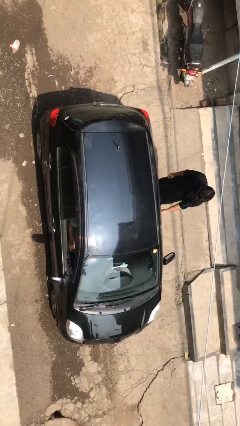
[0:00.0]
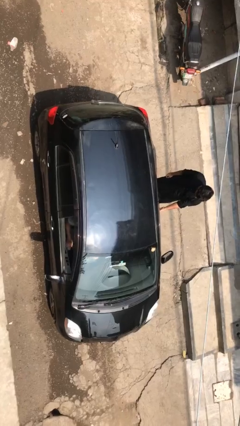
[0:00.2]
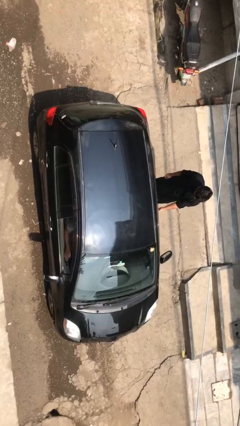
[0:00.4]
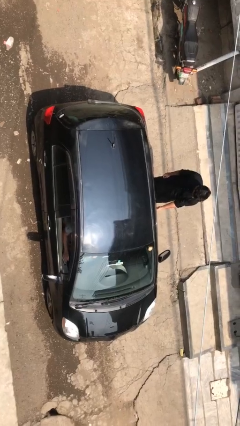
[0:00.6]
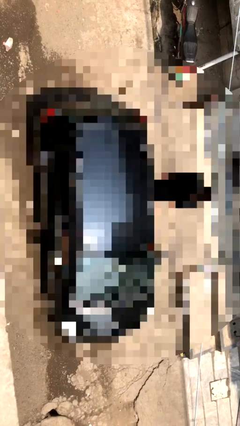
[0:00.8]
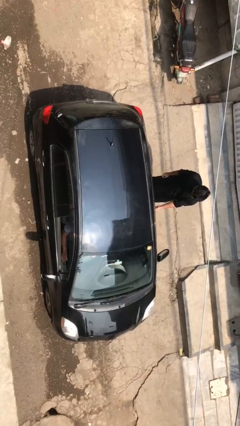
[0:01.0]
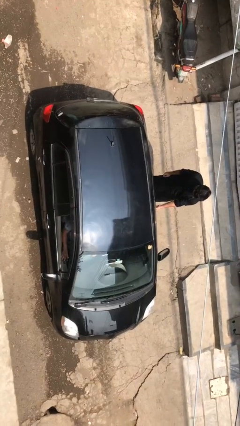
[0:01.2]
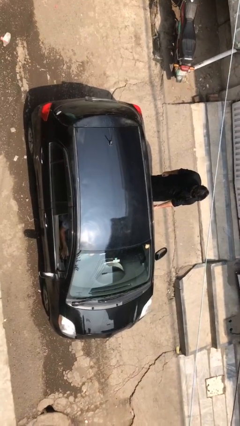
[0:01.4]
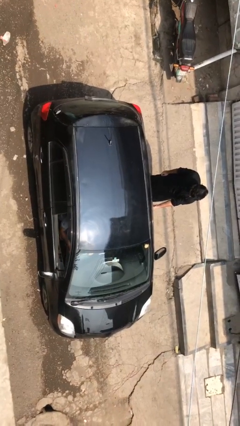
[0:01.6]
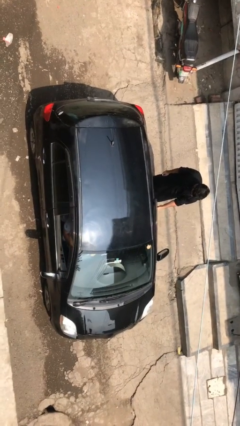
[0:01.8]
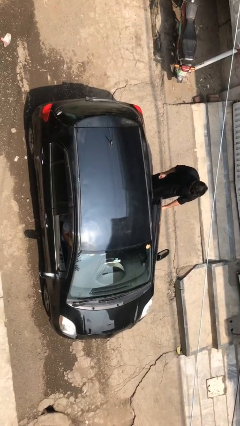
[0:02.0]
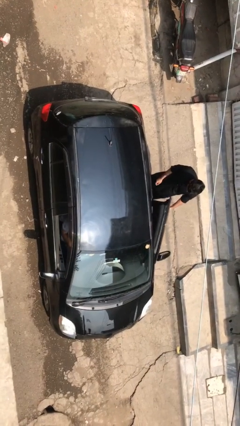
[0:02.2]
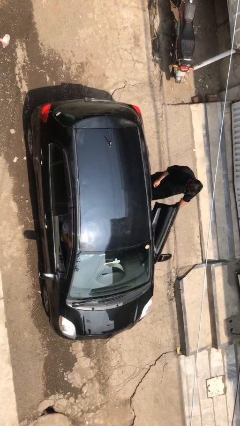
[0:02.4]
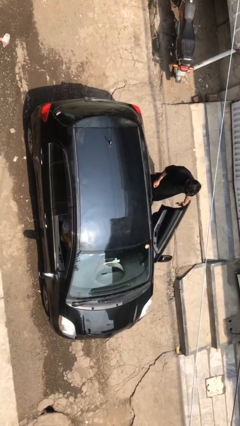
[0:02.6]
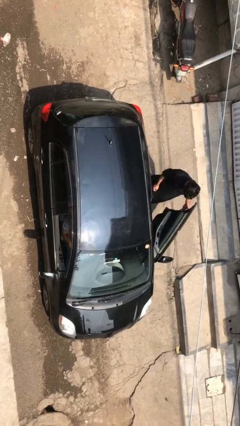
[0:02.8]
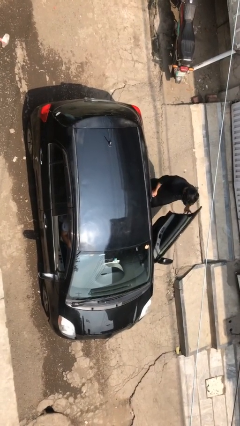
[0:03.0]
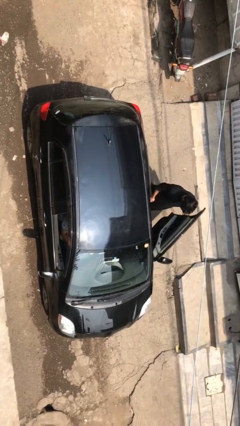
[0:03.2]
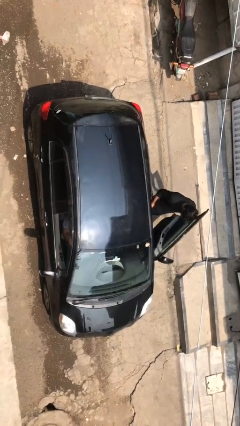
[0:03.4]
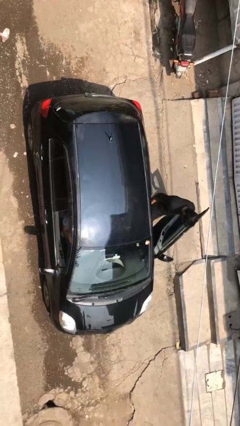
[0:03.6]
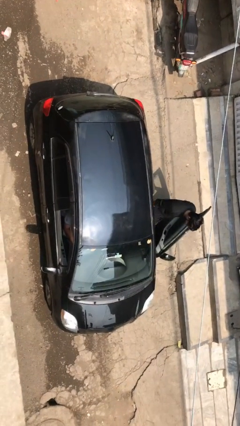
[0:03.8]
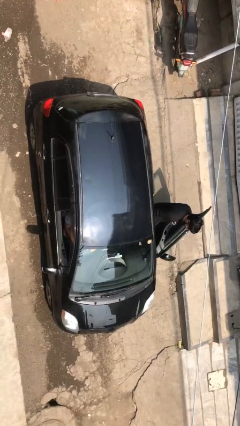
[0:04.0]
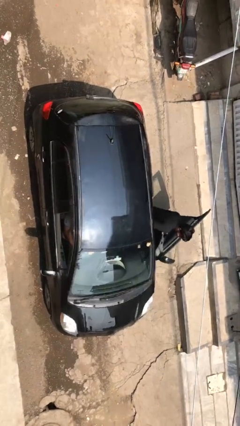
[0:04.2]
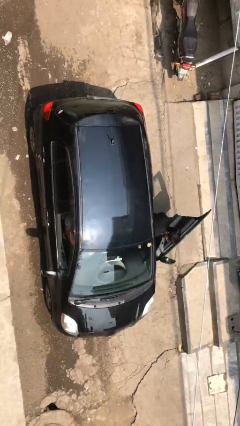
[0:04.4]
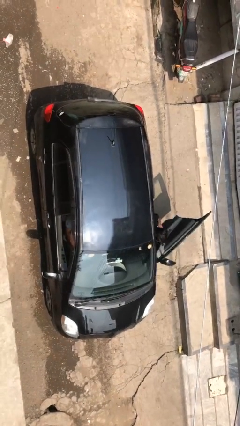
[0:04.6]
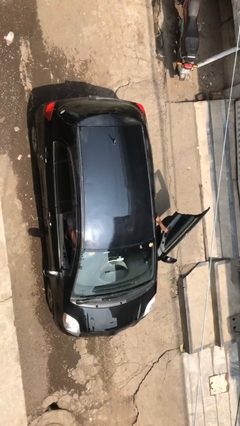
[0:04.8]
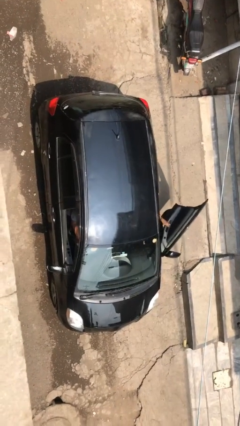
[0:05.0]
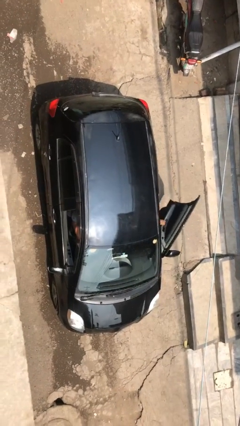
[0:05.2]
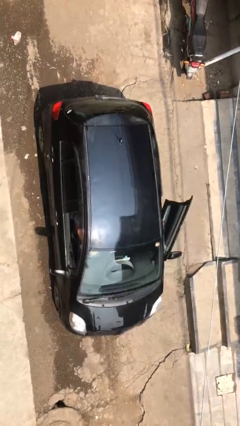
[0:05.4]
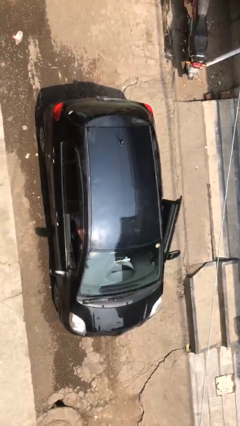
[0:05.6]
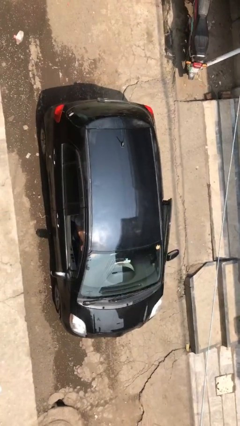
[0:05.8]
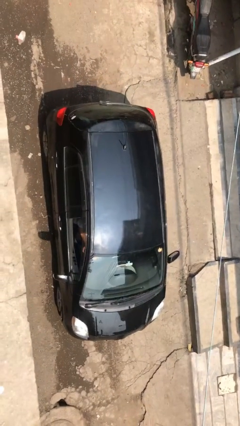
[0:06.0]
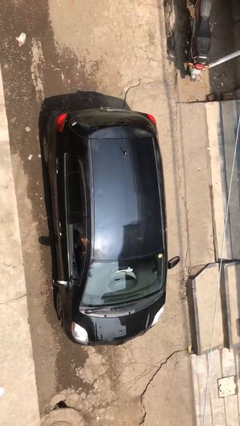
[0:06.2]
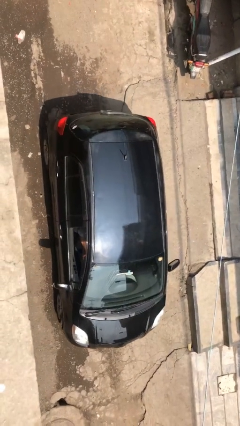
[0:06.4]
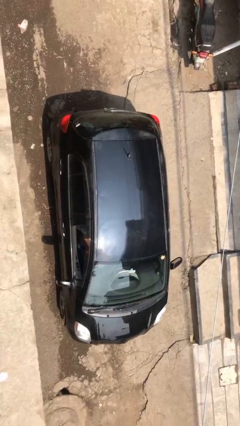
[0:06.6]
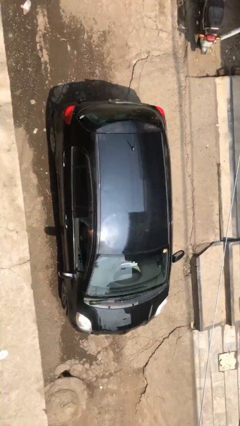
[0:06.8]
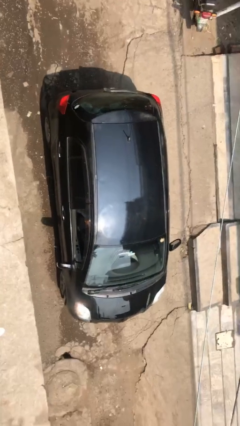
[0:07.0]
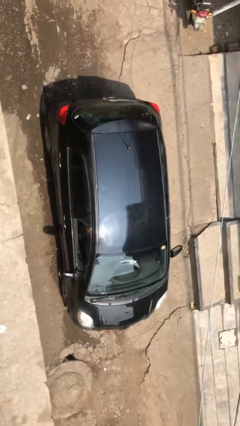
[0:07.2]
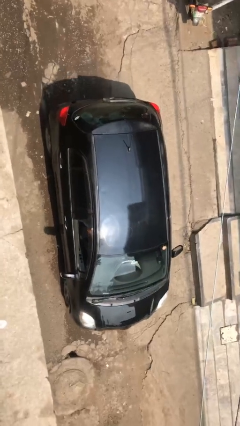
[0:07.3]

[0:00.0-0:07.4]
car picks up person

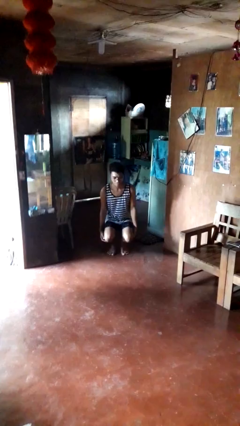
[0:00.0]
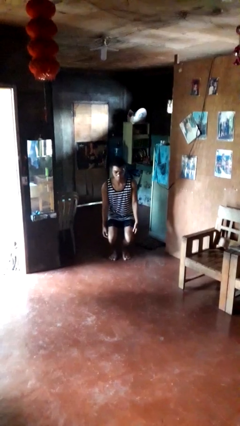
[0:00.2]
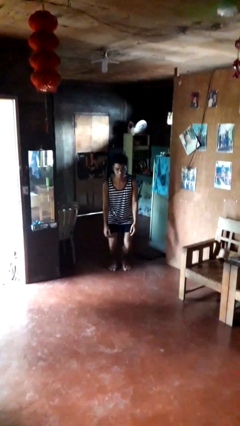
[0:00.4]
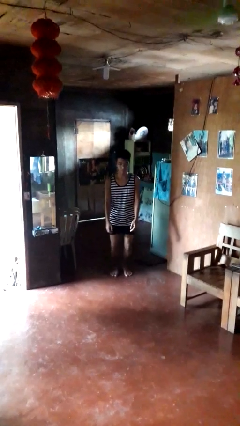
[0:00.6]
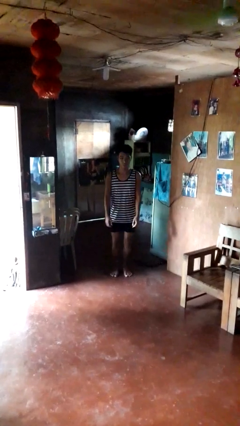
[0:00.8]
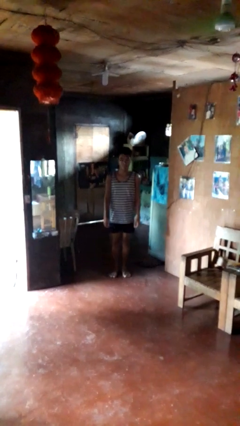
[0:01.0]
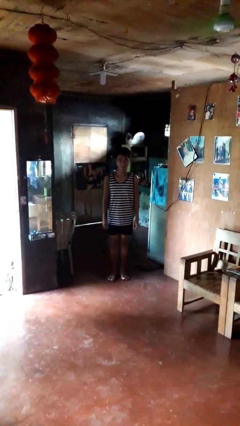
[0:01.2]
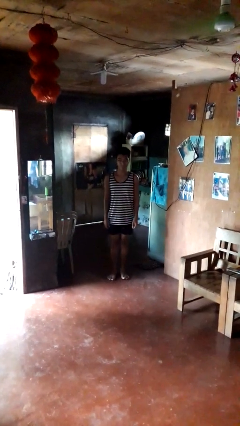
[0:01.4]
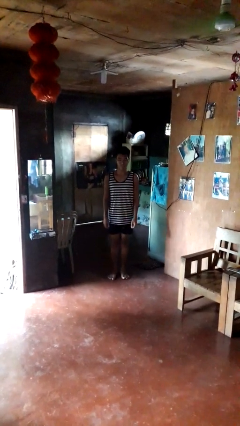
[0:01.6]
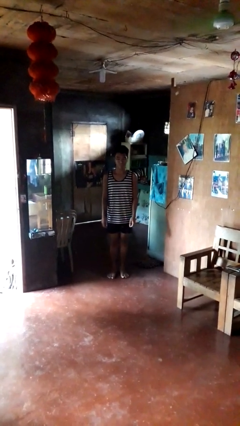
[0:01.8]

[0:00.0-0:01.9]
person stands up

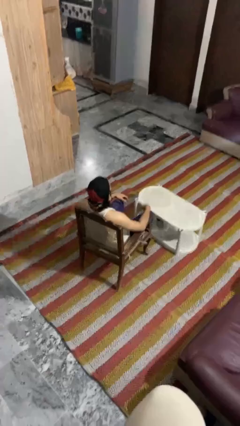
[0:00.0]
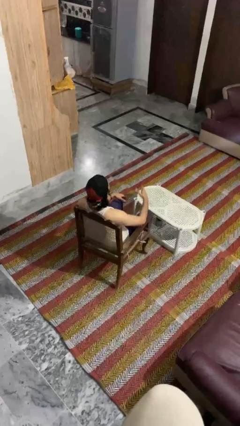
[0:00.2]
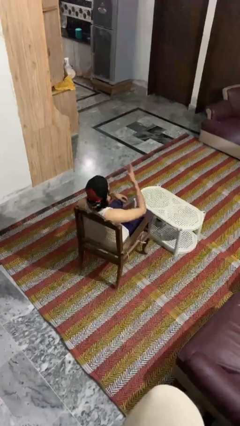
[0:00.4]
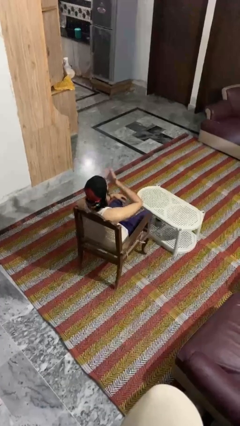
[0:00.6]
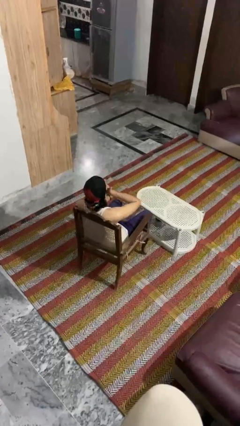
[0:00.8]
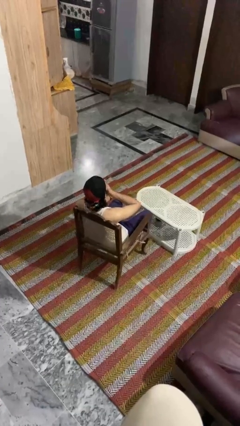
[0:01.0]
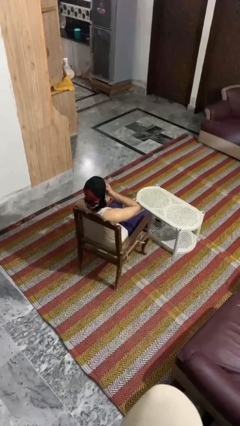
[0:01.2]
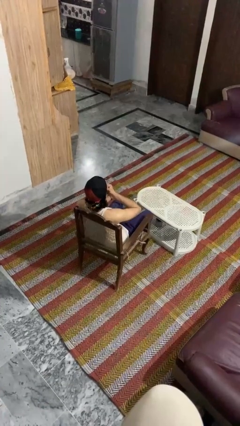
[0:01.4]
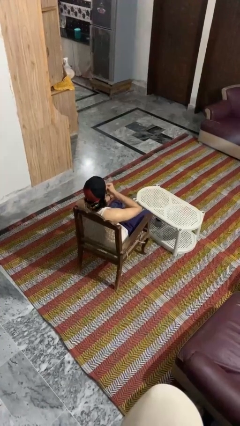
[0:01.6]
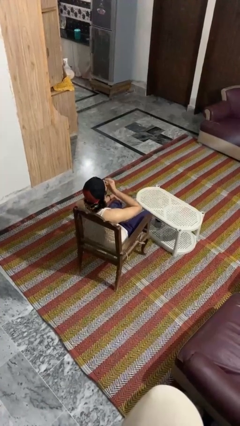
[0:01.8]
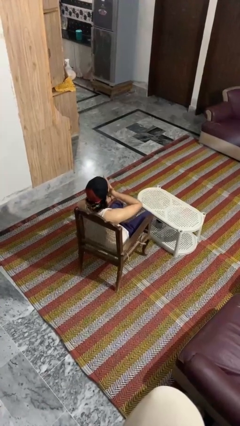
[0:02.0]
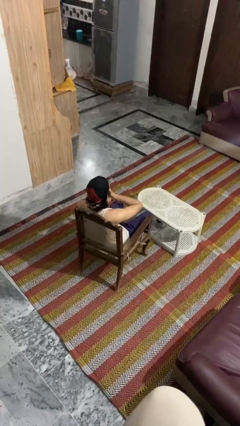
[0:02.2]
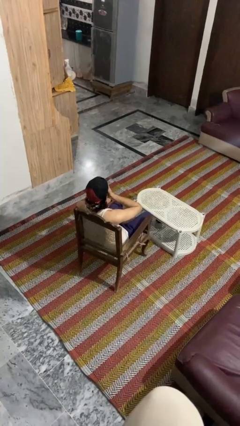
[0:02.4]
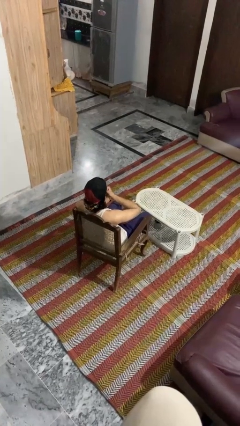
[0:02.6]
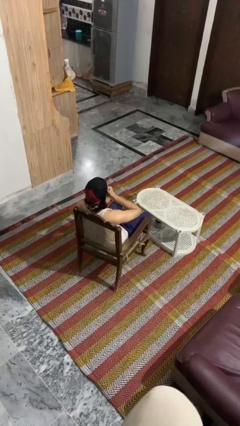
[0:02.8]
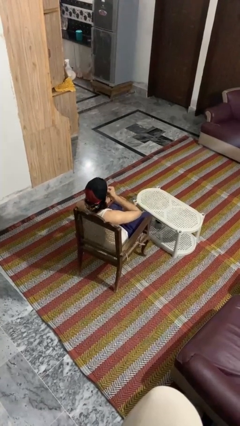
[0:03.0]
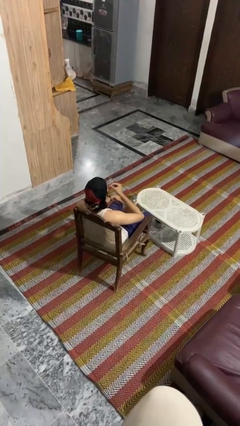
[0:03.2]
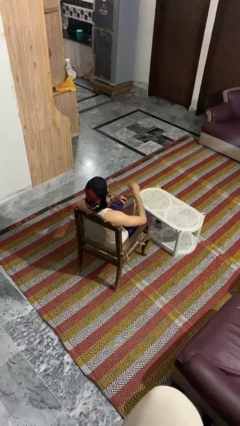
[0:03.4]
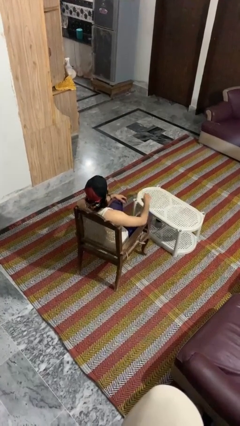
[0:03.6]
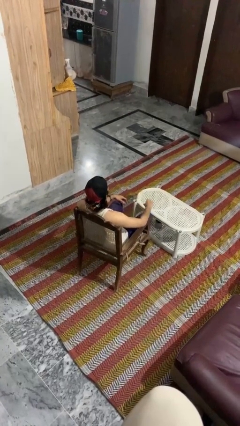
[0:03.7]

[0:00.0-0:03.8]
person strokes chin

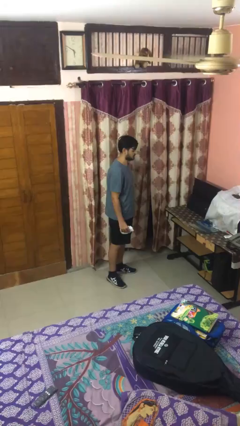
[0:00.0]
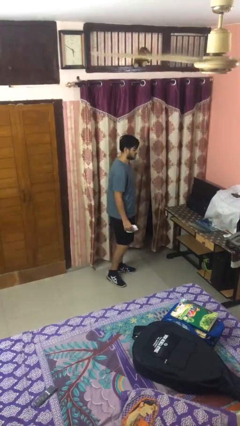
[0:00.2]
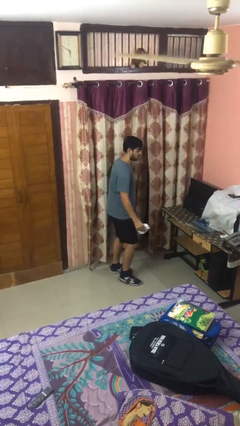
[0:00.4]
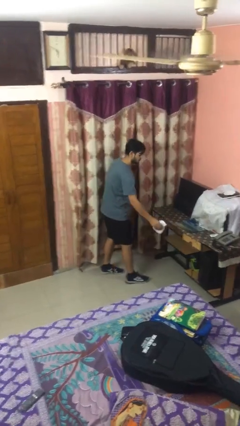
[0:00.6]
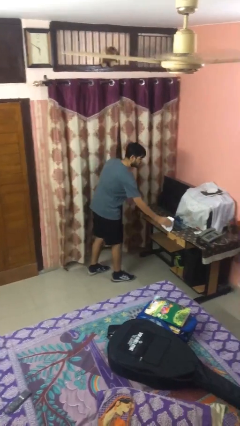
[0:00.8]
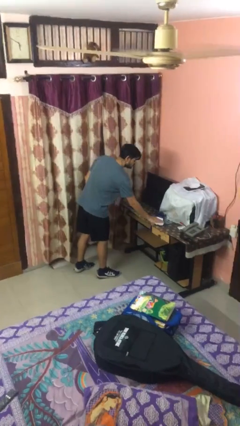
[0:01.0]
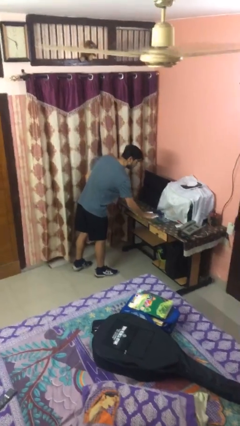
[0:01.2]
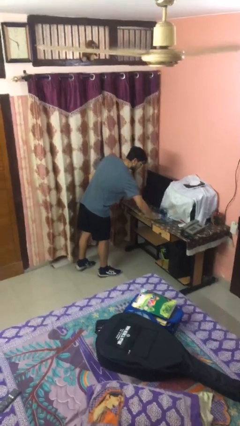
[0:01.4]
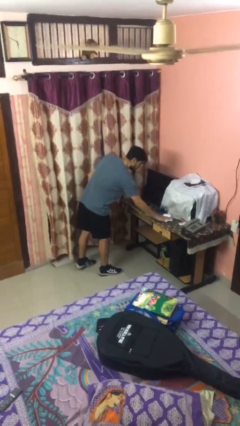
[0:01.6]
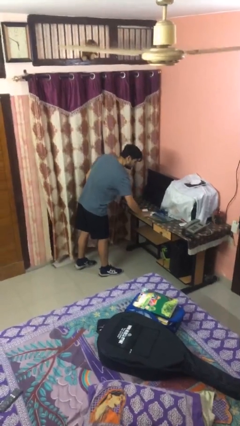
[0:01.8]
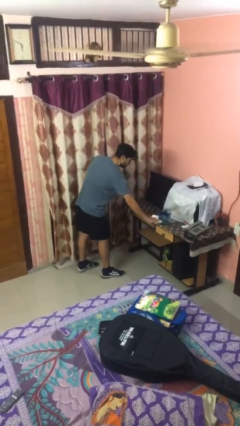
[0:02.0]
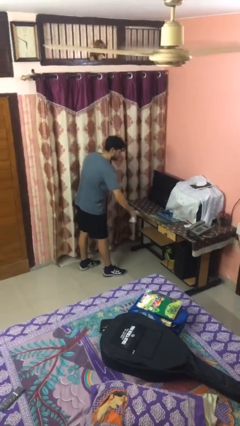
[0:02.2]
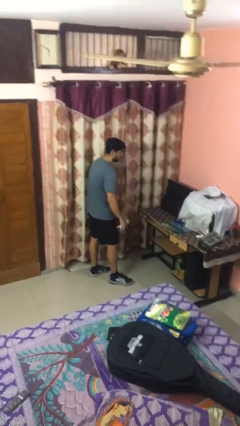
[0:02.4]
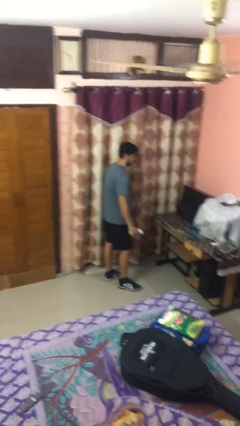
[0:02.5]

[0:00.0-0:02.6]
person cleans table with rag

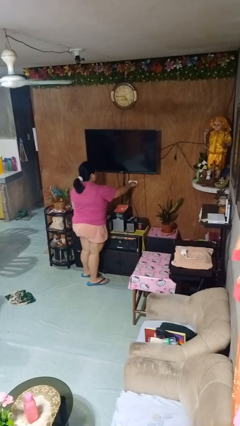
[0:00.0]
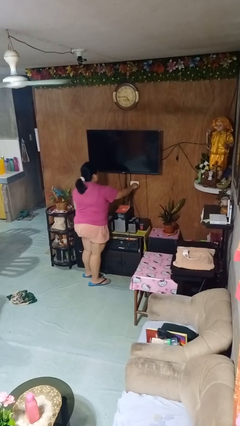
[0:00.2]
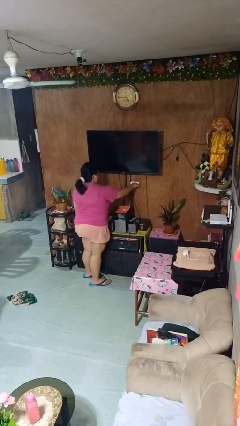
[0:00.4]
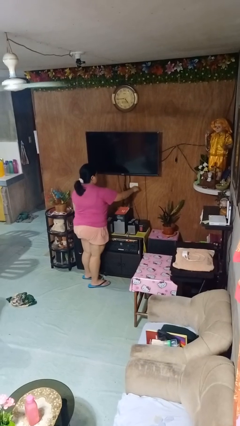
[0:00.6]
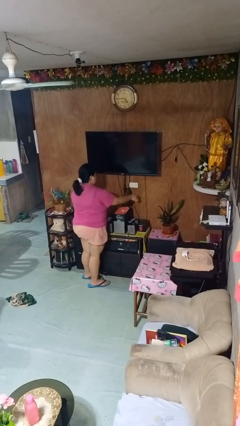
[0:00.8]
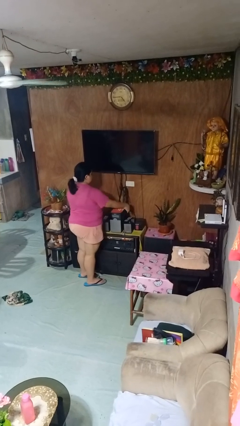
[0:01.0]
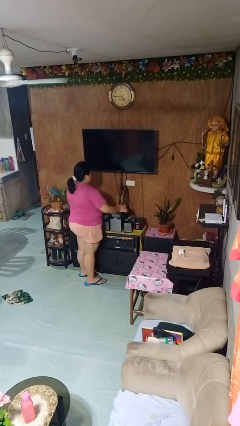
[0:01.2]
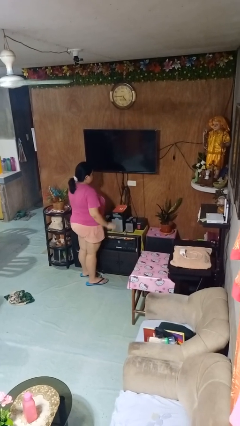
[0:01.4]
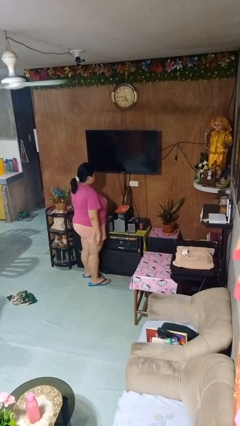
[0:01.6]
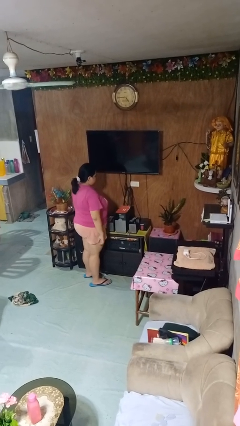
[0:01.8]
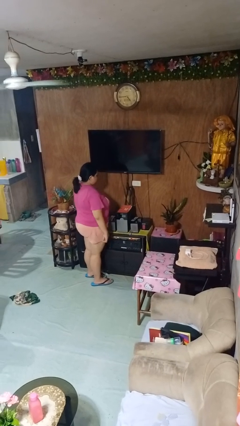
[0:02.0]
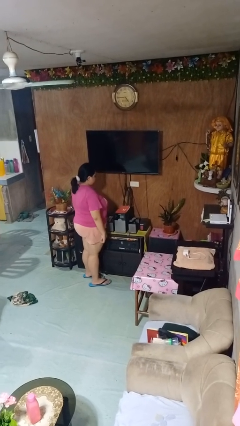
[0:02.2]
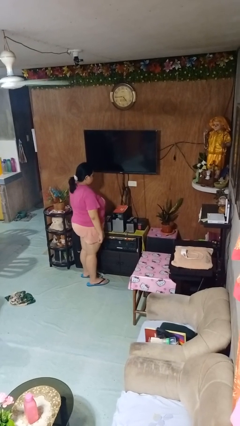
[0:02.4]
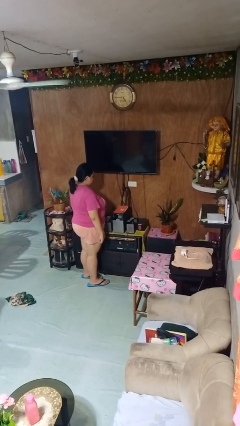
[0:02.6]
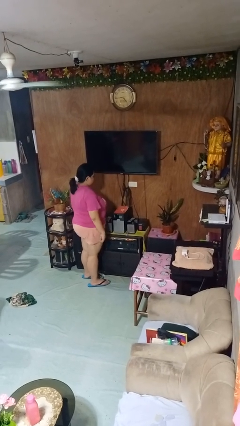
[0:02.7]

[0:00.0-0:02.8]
person unplugs from electrical socket
